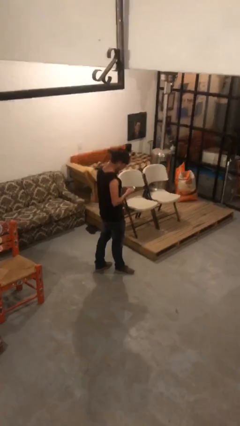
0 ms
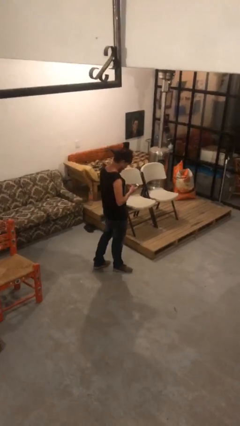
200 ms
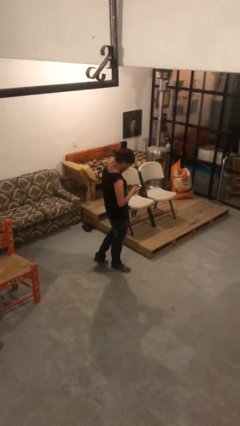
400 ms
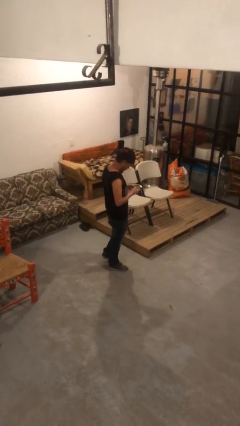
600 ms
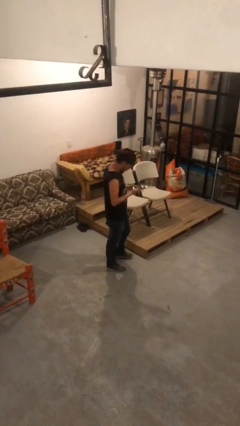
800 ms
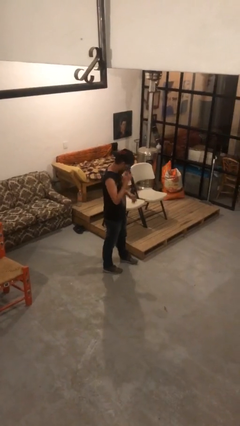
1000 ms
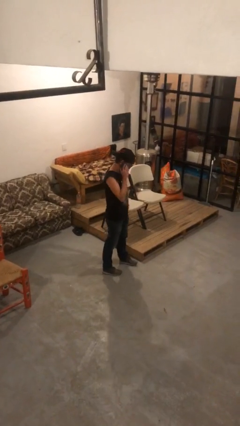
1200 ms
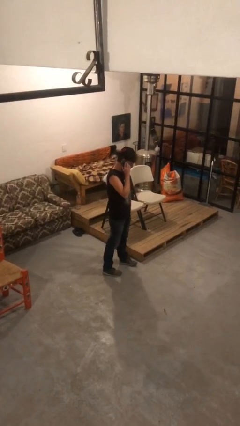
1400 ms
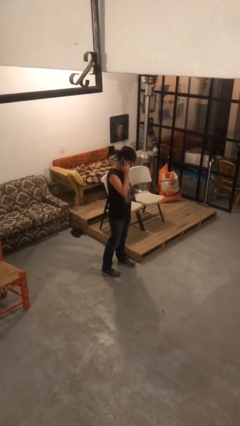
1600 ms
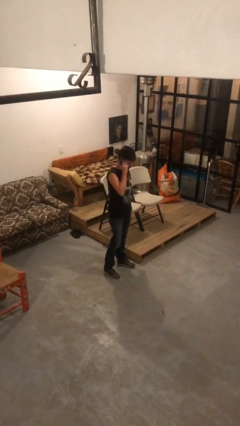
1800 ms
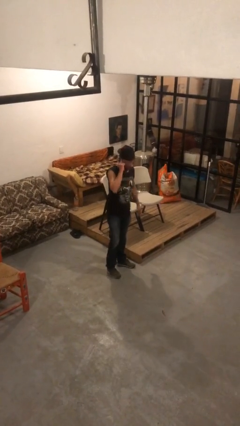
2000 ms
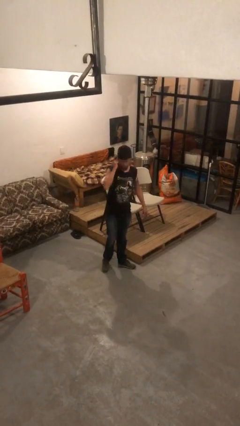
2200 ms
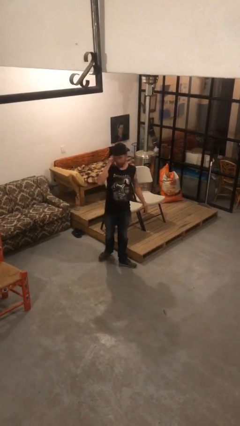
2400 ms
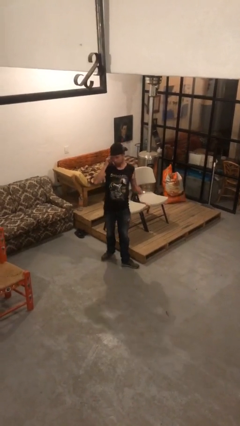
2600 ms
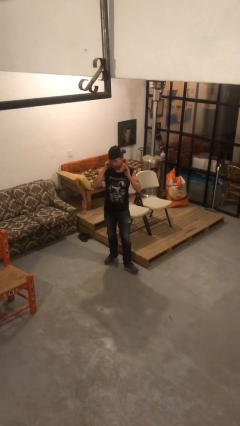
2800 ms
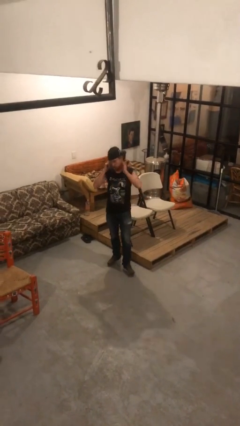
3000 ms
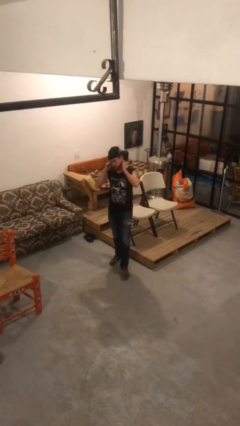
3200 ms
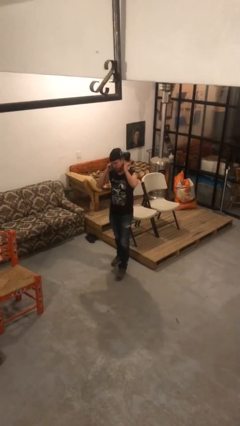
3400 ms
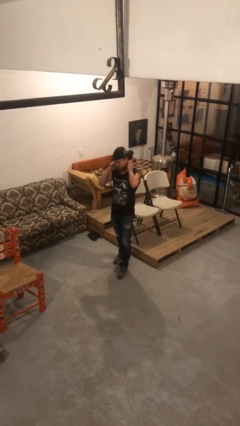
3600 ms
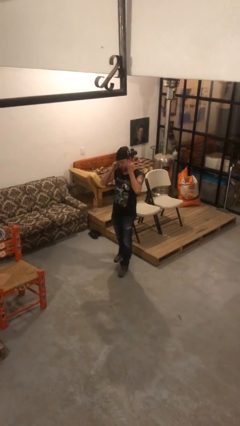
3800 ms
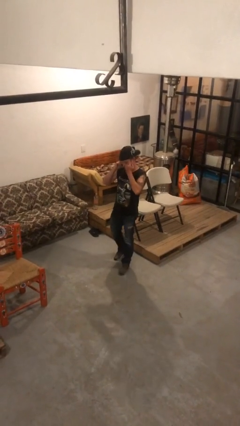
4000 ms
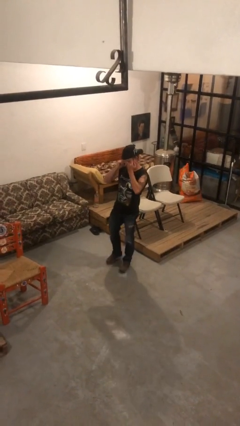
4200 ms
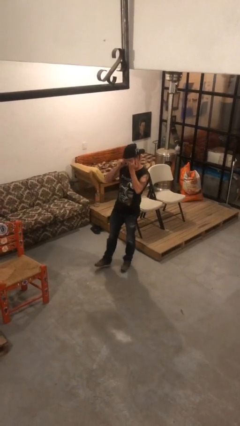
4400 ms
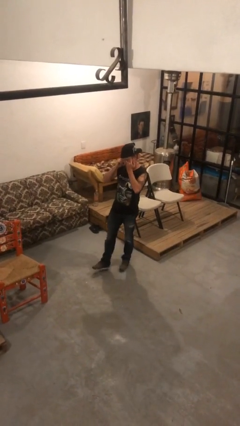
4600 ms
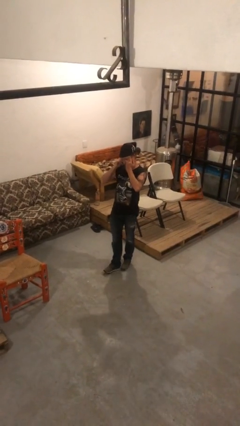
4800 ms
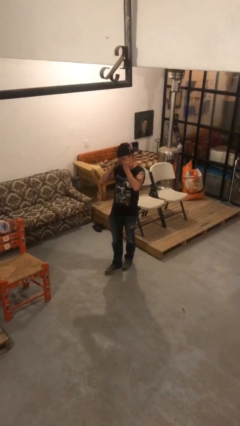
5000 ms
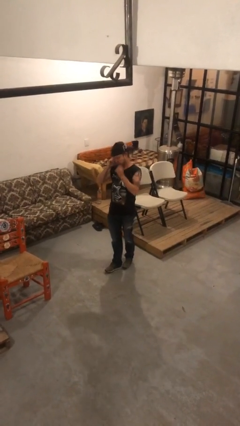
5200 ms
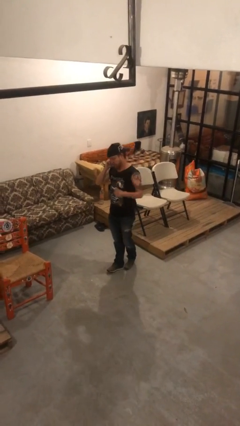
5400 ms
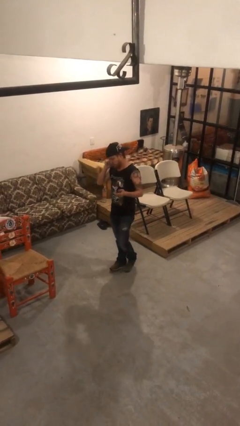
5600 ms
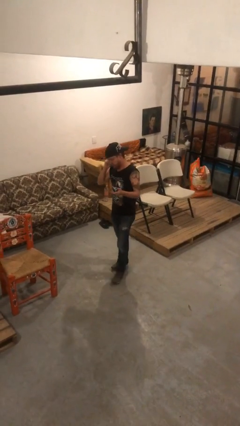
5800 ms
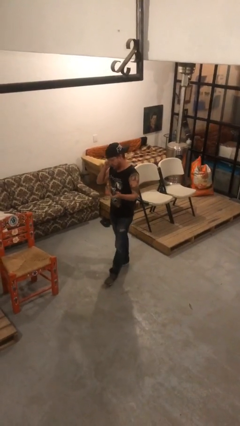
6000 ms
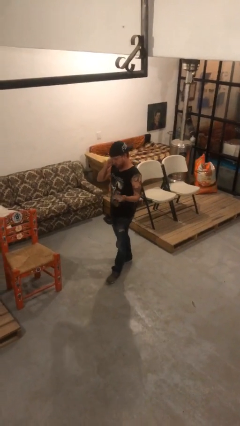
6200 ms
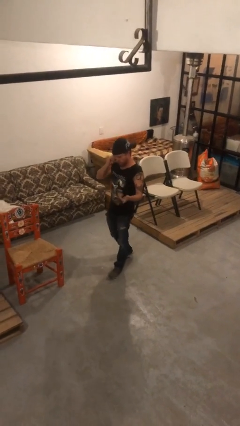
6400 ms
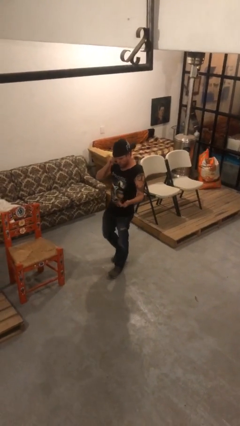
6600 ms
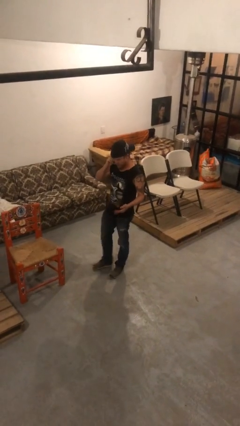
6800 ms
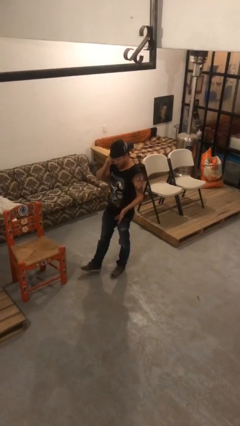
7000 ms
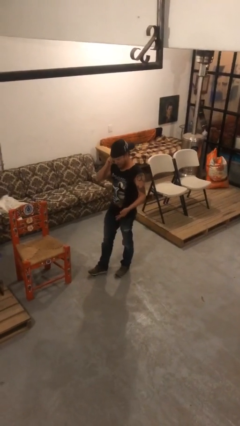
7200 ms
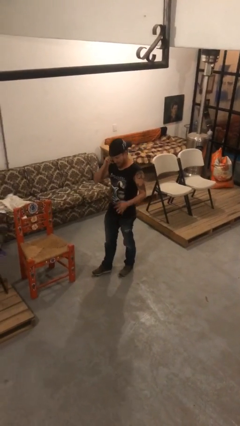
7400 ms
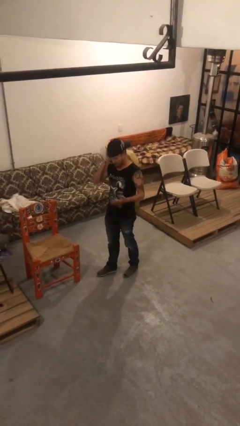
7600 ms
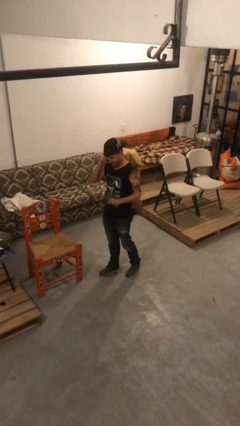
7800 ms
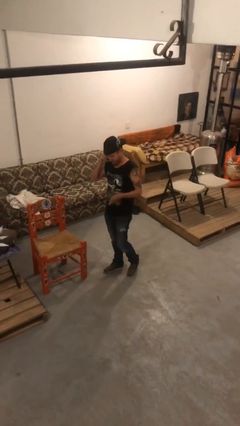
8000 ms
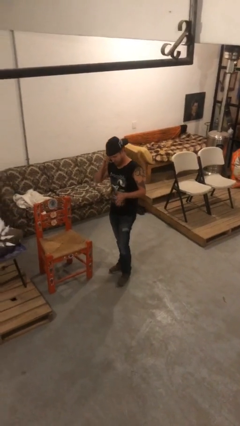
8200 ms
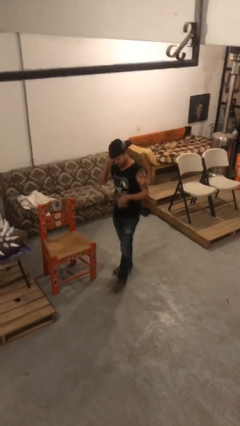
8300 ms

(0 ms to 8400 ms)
person talks on phone

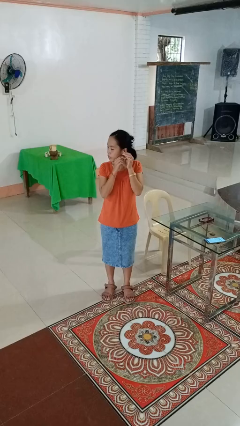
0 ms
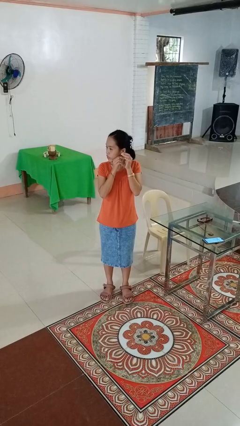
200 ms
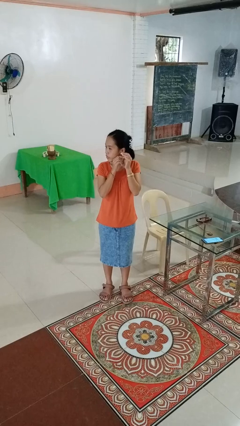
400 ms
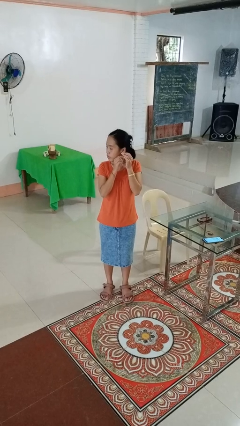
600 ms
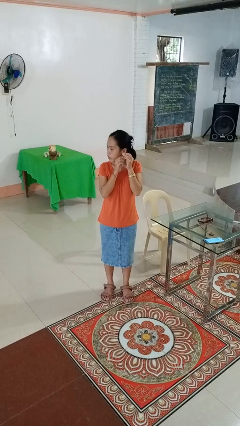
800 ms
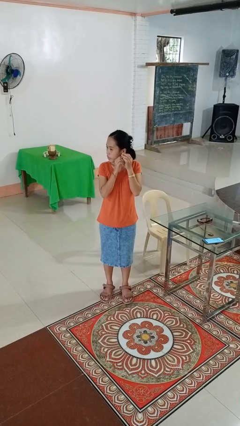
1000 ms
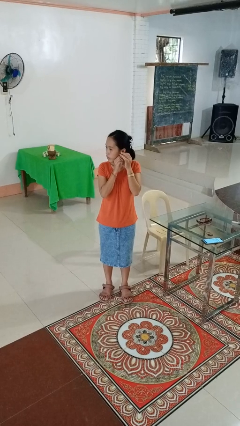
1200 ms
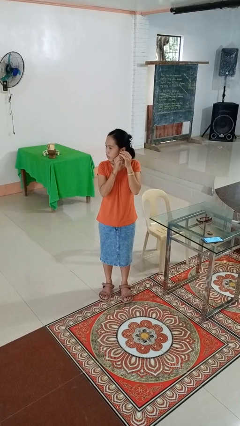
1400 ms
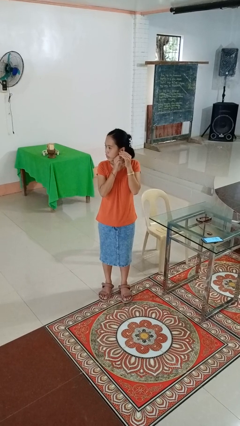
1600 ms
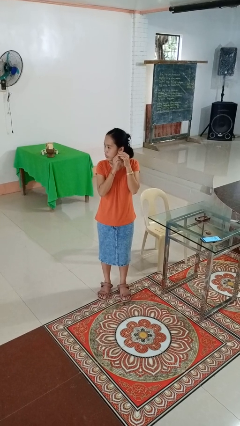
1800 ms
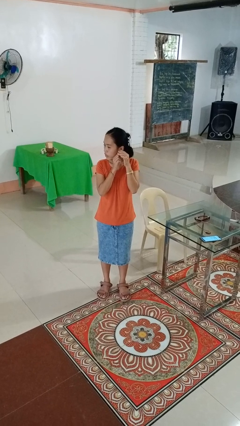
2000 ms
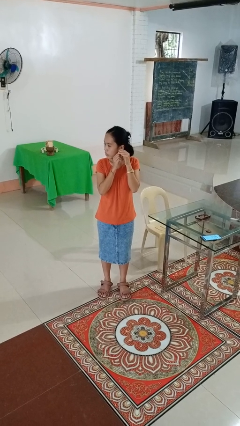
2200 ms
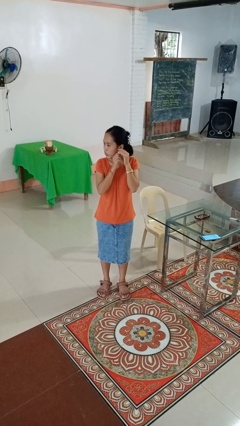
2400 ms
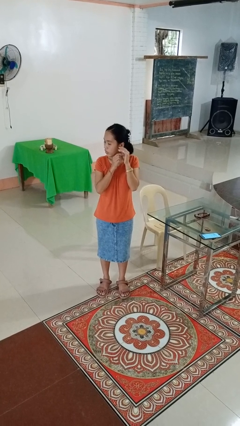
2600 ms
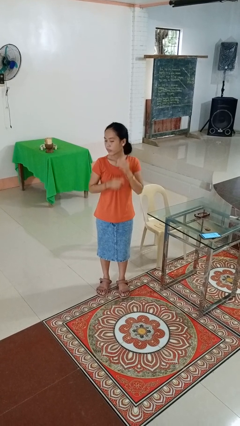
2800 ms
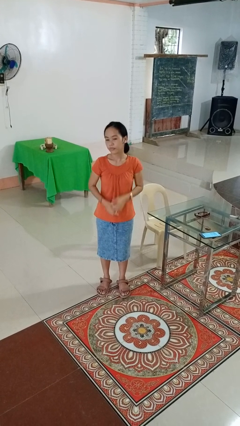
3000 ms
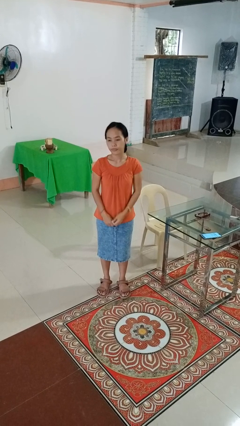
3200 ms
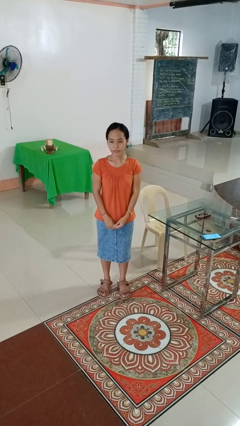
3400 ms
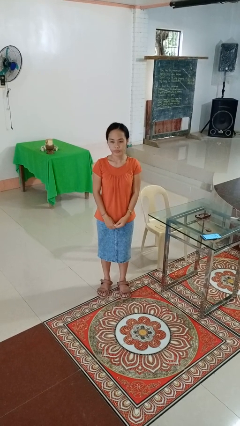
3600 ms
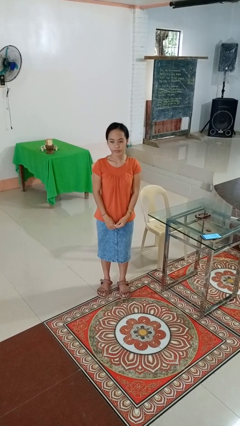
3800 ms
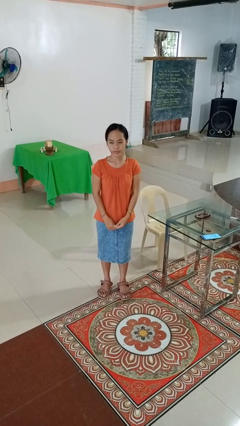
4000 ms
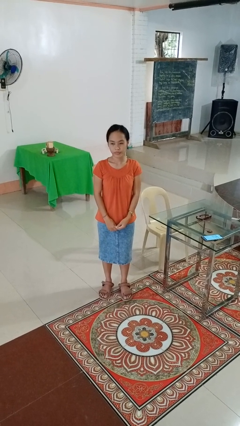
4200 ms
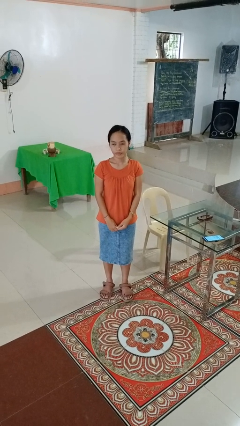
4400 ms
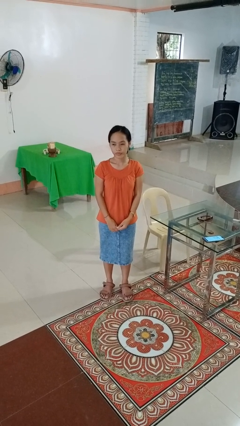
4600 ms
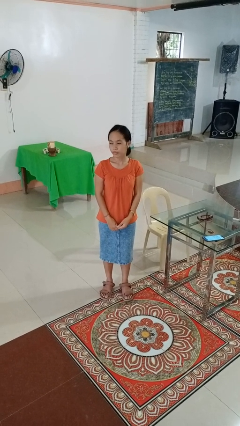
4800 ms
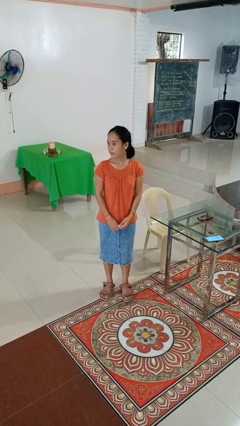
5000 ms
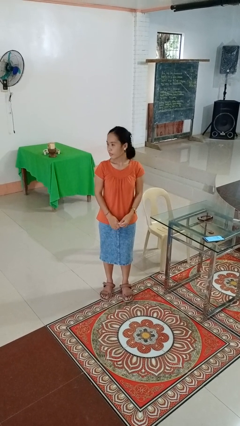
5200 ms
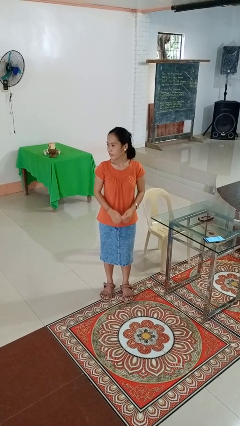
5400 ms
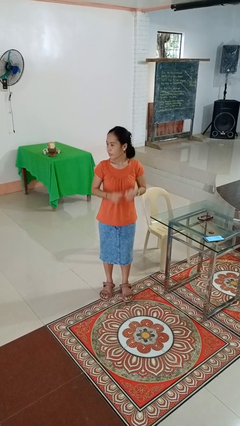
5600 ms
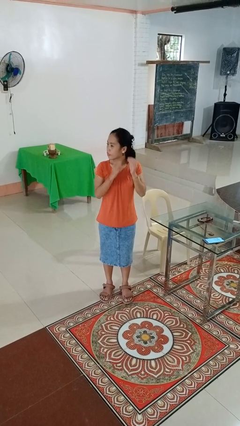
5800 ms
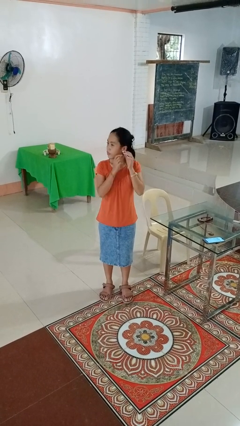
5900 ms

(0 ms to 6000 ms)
person puts on earrings

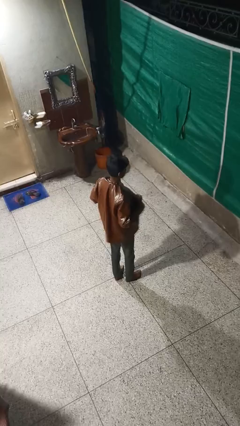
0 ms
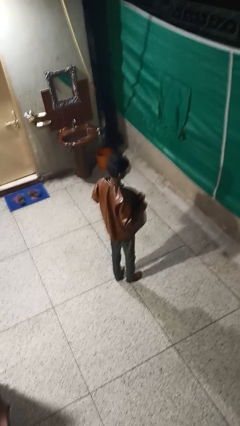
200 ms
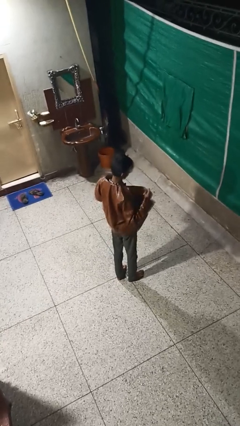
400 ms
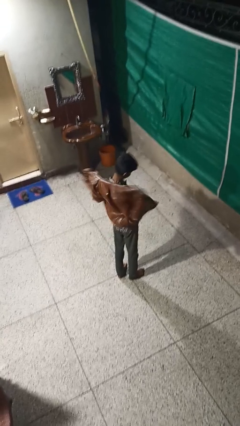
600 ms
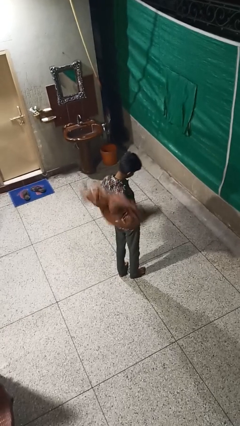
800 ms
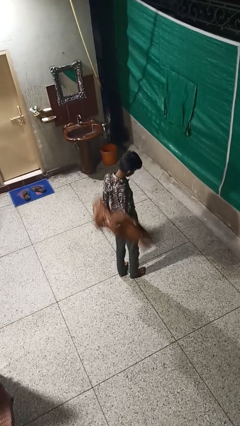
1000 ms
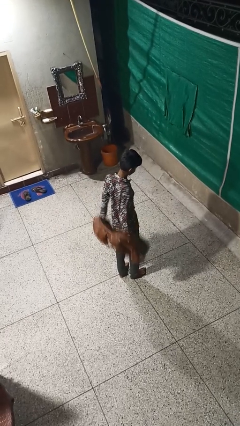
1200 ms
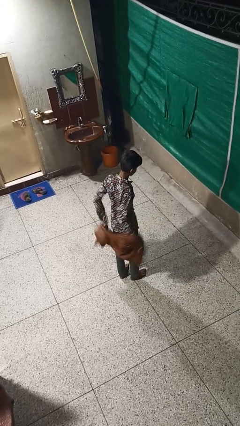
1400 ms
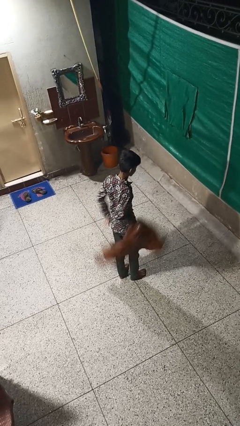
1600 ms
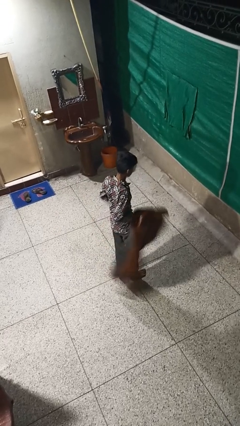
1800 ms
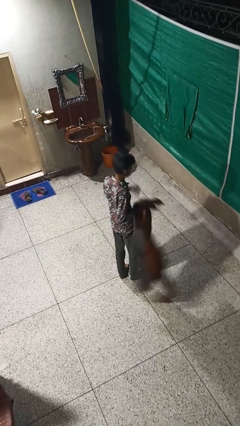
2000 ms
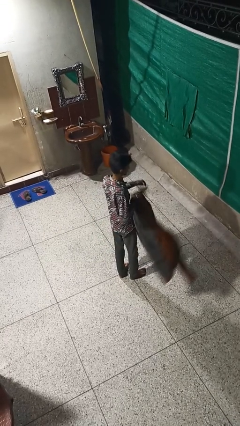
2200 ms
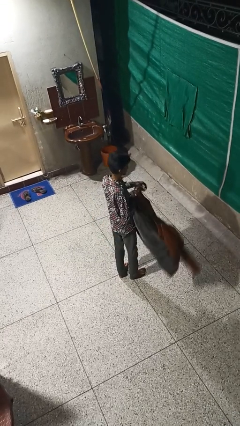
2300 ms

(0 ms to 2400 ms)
person takes off jacket

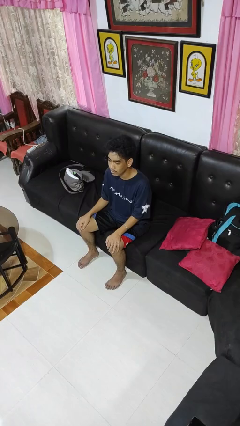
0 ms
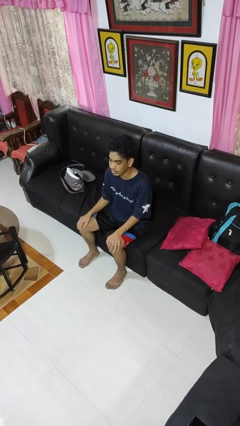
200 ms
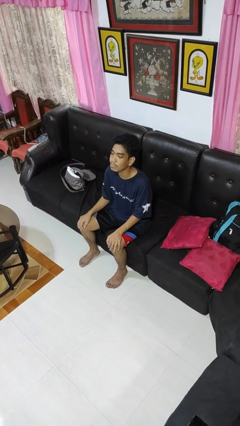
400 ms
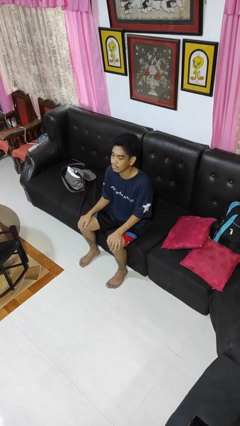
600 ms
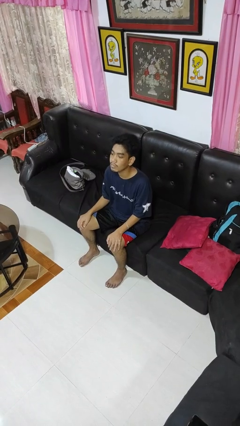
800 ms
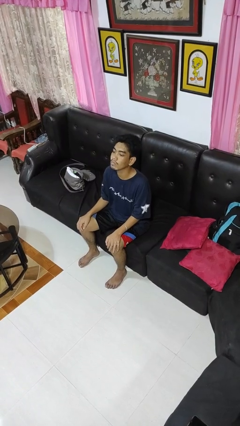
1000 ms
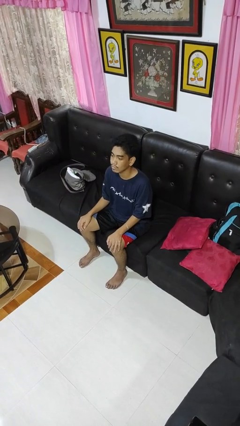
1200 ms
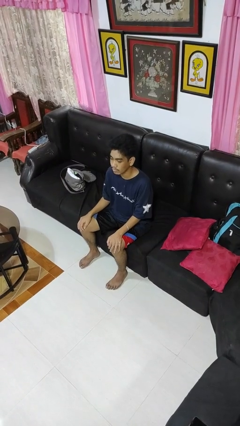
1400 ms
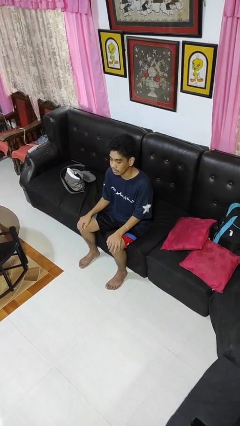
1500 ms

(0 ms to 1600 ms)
person nods head
